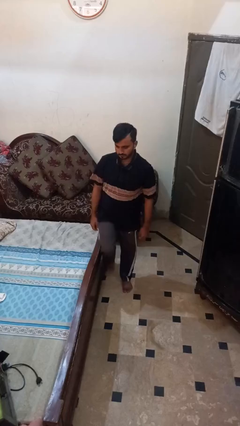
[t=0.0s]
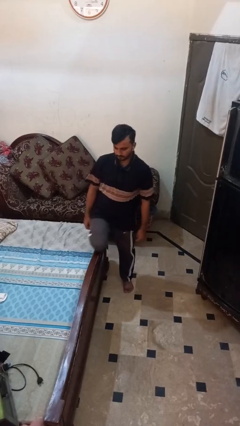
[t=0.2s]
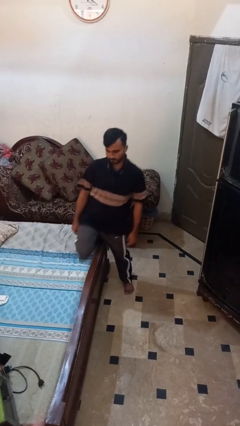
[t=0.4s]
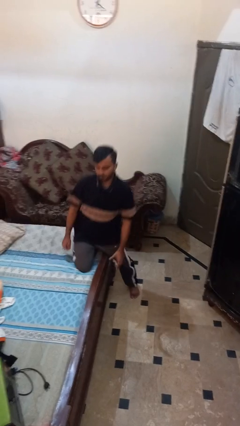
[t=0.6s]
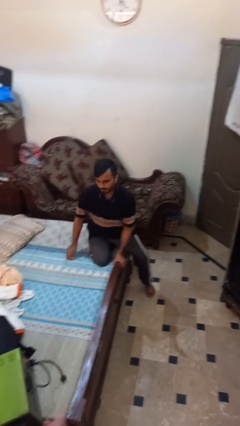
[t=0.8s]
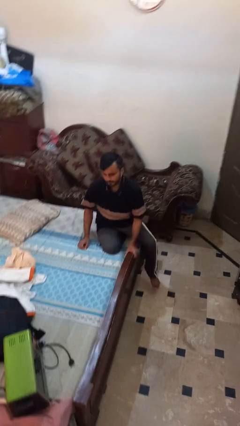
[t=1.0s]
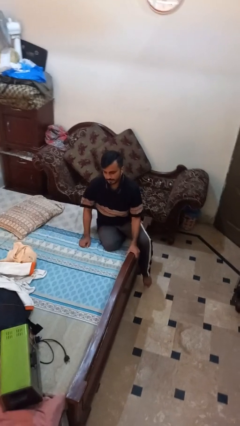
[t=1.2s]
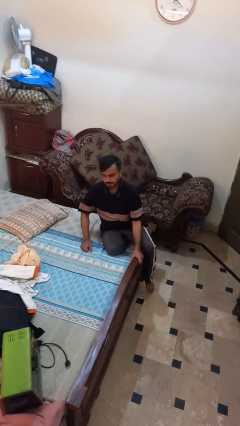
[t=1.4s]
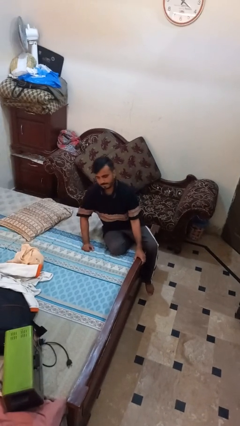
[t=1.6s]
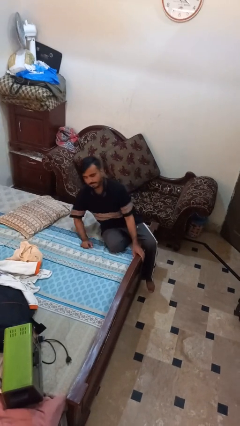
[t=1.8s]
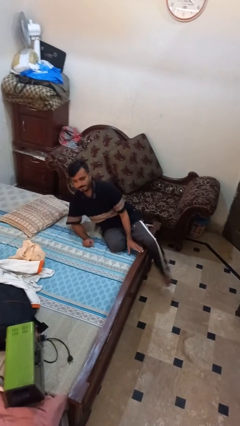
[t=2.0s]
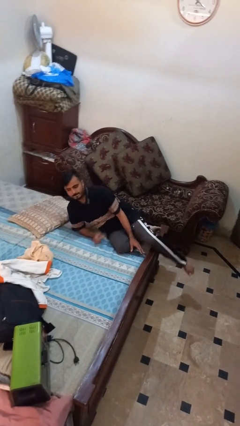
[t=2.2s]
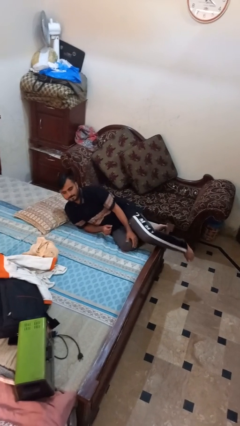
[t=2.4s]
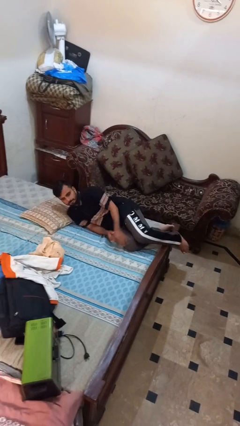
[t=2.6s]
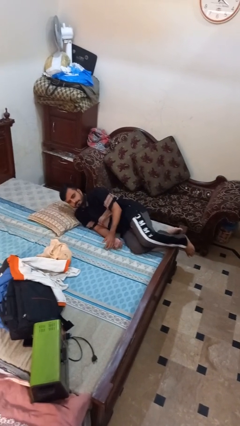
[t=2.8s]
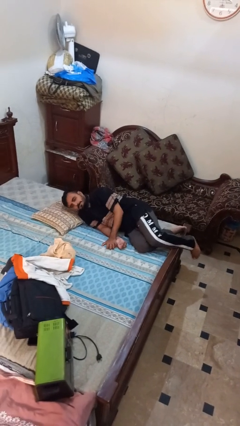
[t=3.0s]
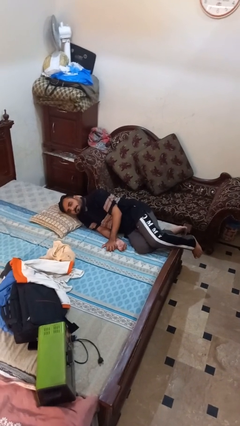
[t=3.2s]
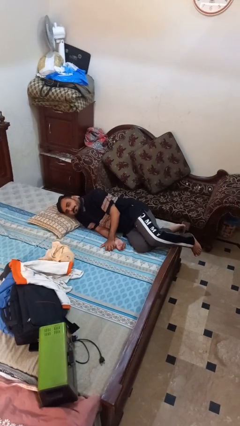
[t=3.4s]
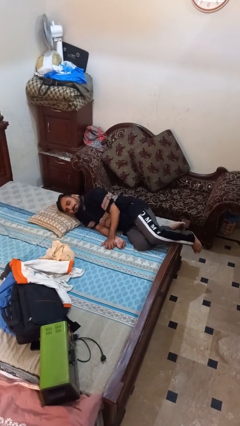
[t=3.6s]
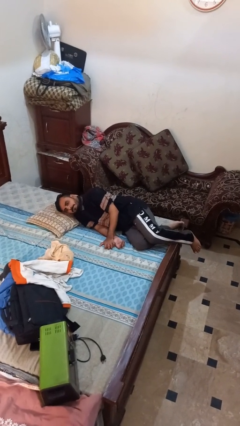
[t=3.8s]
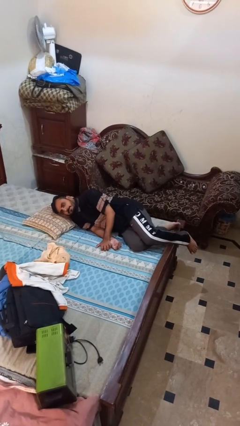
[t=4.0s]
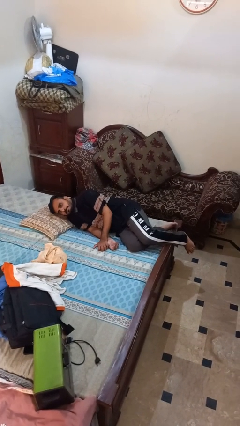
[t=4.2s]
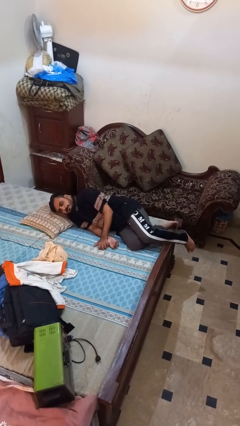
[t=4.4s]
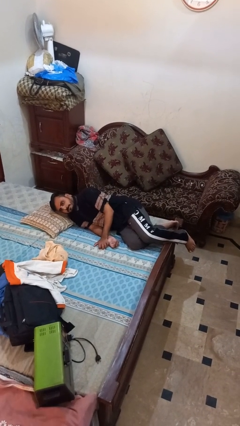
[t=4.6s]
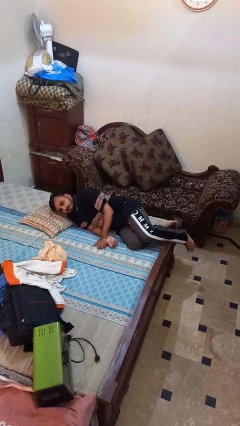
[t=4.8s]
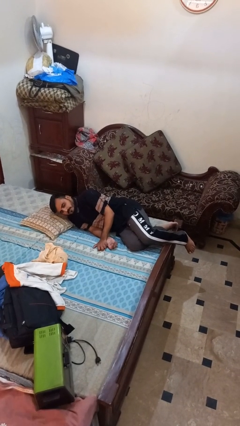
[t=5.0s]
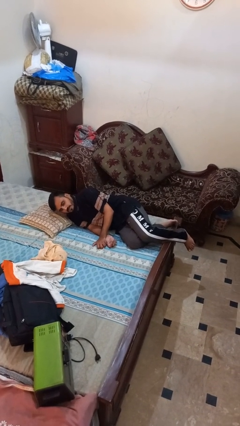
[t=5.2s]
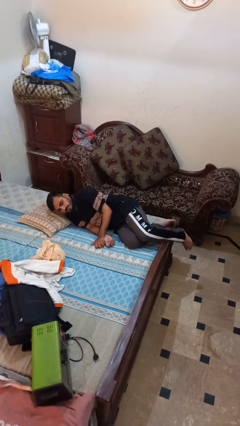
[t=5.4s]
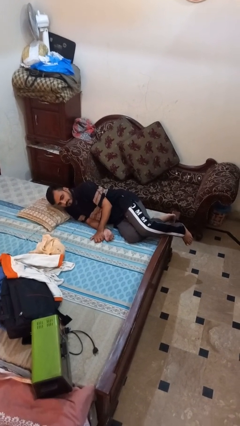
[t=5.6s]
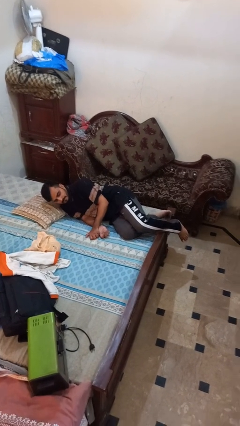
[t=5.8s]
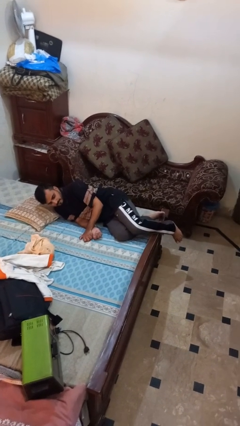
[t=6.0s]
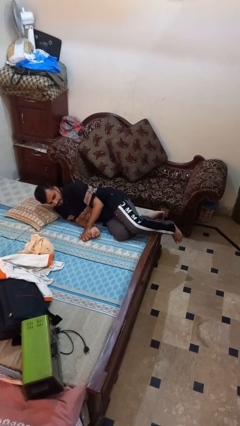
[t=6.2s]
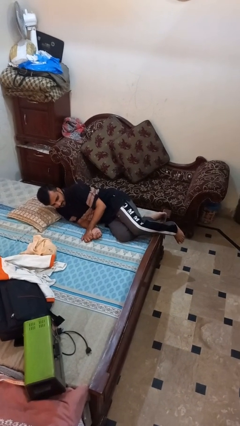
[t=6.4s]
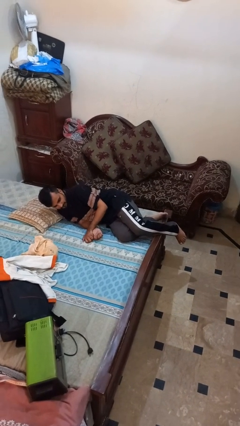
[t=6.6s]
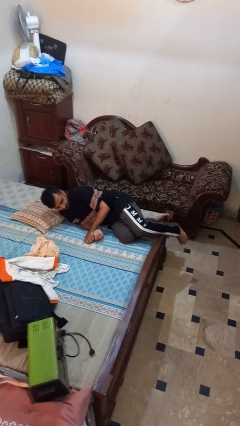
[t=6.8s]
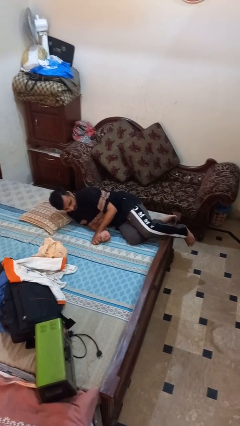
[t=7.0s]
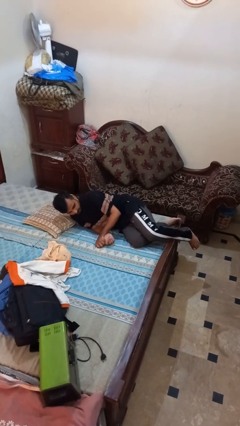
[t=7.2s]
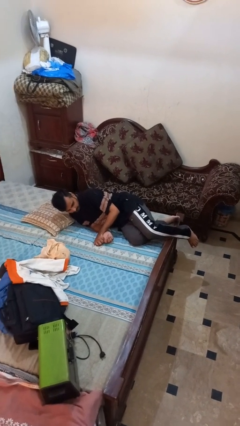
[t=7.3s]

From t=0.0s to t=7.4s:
person lies down on bed

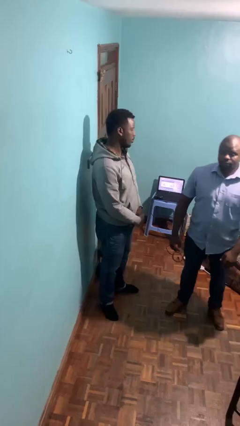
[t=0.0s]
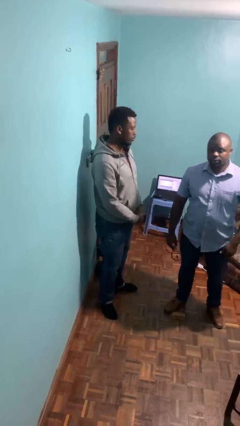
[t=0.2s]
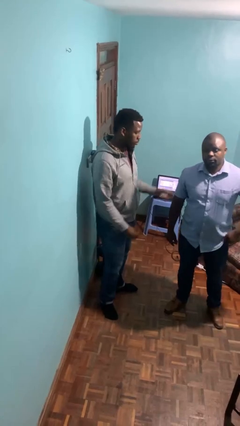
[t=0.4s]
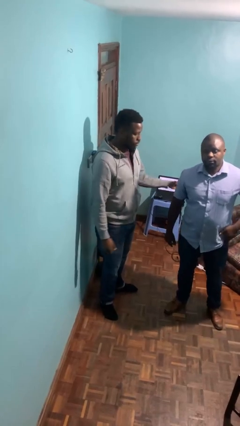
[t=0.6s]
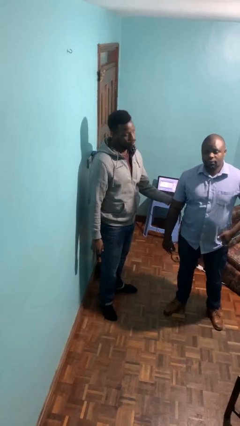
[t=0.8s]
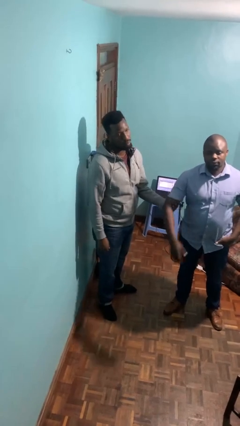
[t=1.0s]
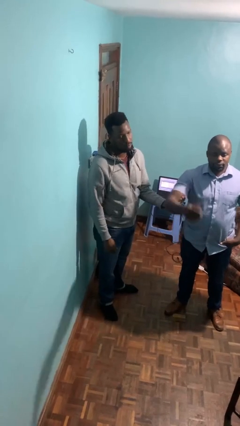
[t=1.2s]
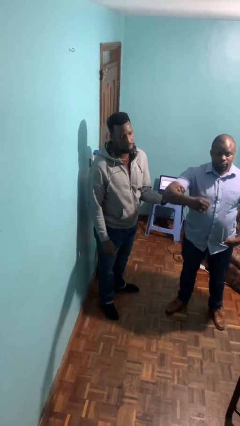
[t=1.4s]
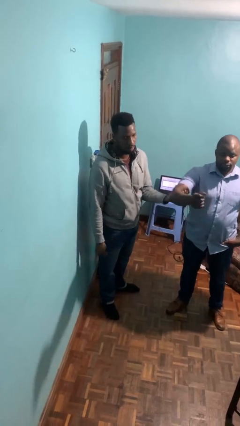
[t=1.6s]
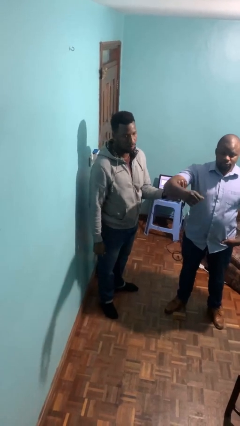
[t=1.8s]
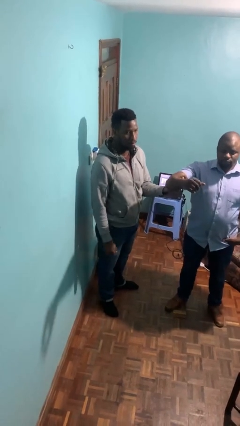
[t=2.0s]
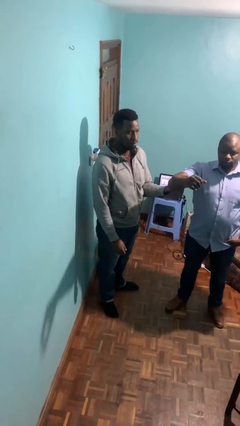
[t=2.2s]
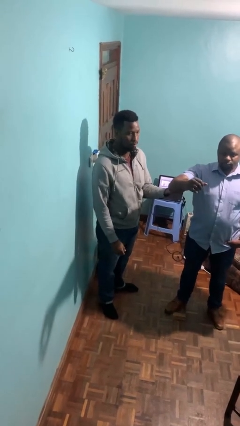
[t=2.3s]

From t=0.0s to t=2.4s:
person grabs person by bicep

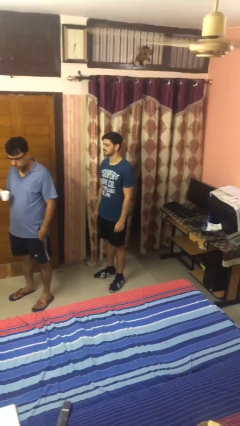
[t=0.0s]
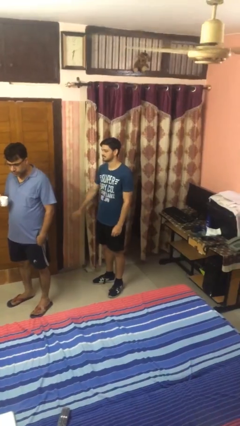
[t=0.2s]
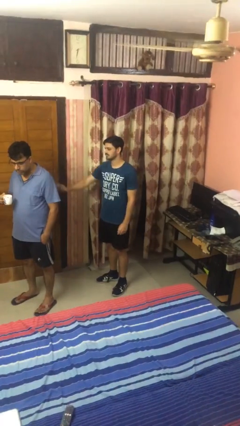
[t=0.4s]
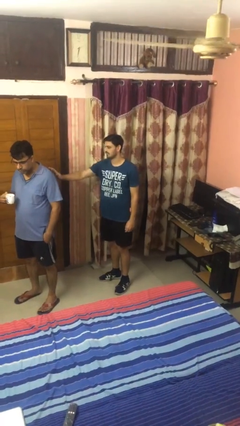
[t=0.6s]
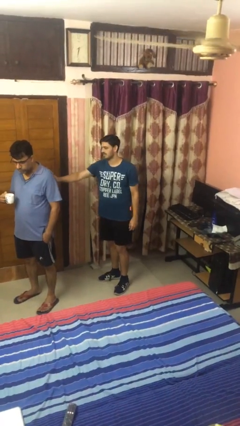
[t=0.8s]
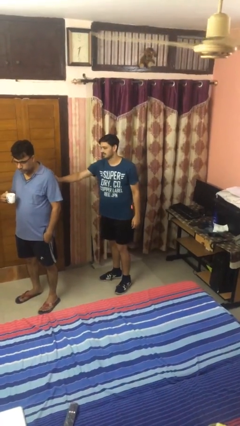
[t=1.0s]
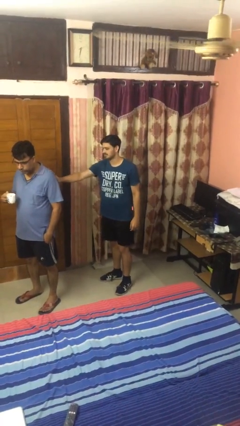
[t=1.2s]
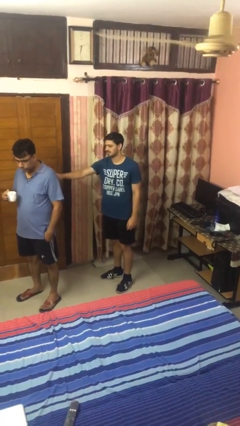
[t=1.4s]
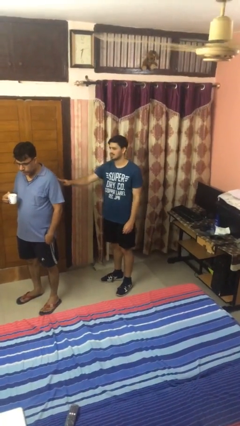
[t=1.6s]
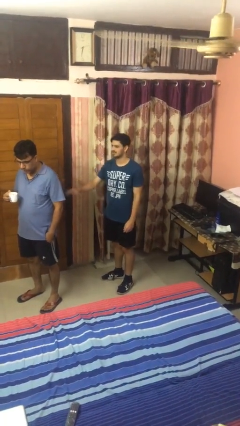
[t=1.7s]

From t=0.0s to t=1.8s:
person touches back of person

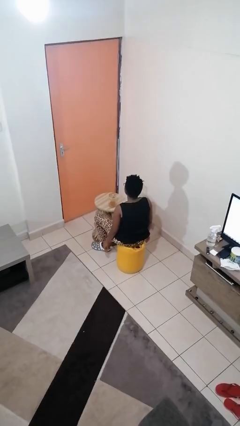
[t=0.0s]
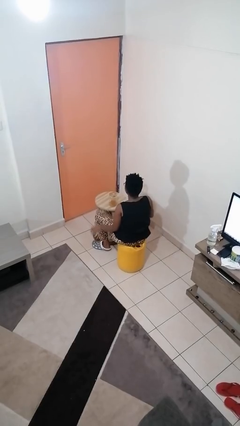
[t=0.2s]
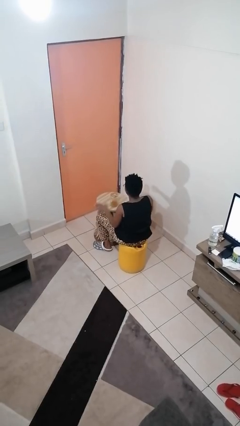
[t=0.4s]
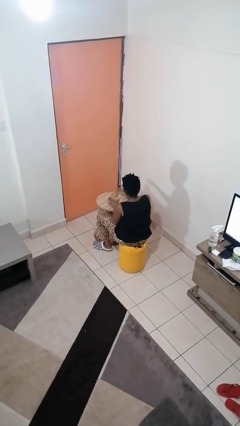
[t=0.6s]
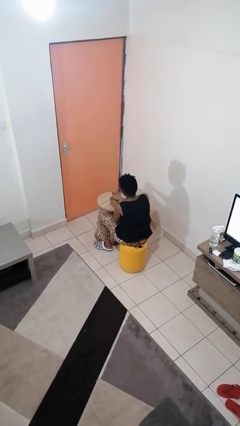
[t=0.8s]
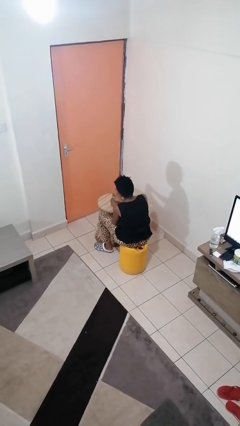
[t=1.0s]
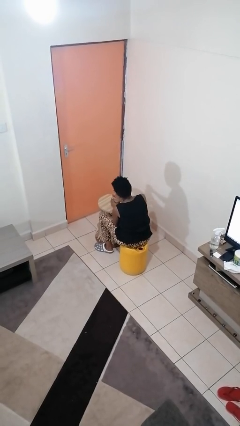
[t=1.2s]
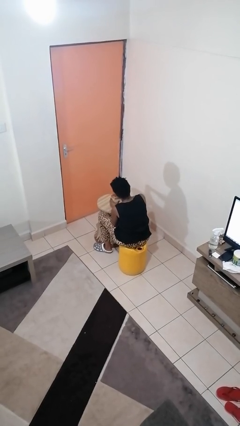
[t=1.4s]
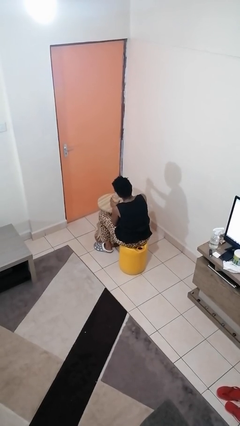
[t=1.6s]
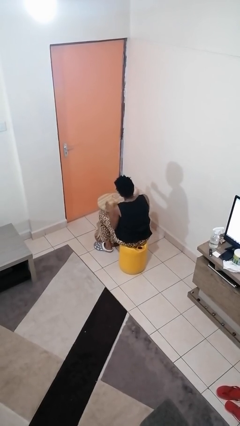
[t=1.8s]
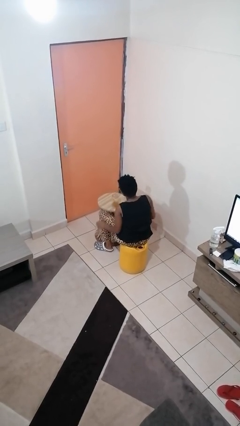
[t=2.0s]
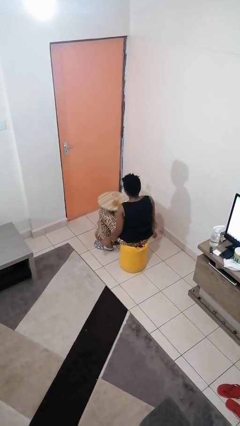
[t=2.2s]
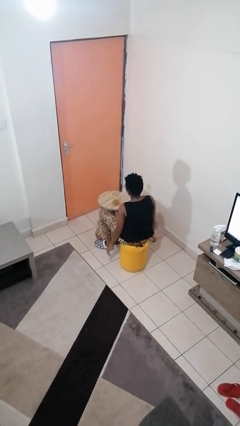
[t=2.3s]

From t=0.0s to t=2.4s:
person opens jar

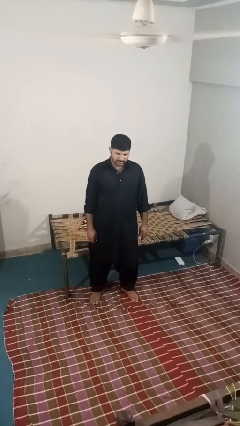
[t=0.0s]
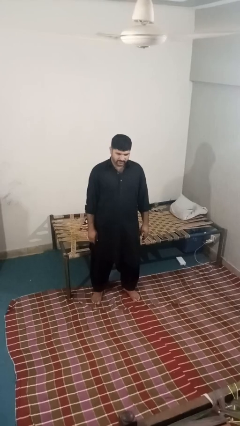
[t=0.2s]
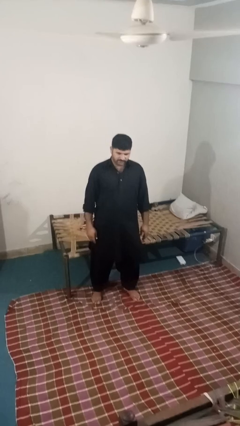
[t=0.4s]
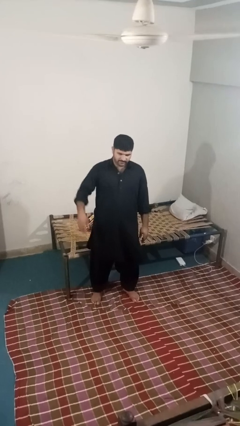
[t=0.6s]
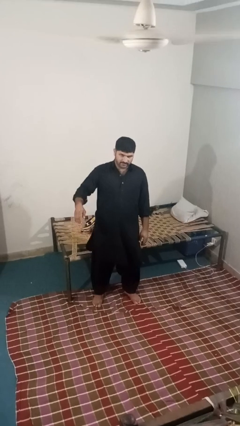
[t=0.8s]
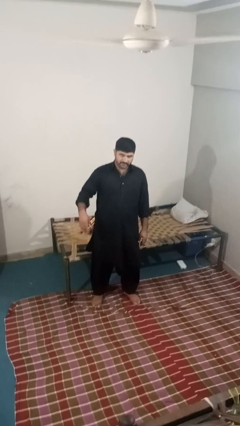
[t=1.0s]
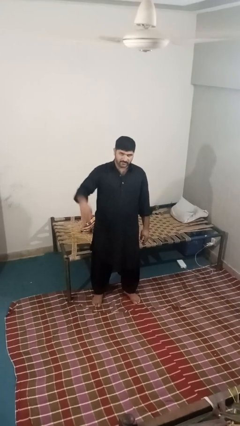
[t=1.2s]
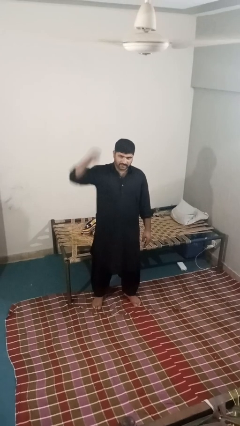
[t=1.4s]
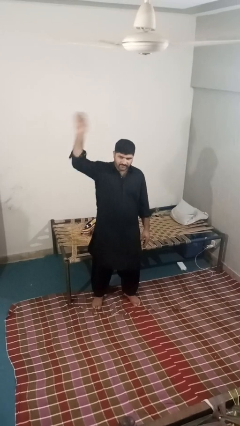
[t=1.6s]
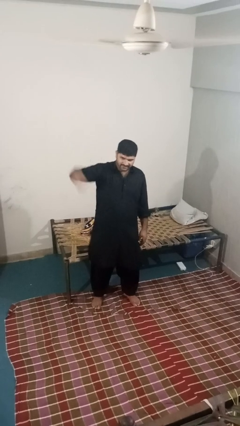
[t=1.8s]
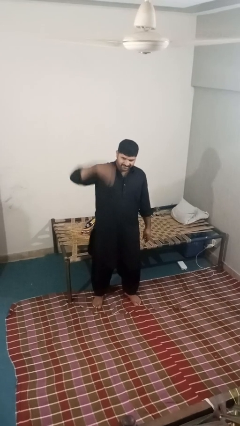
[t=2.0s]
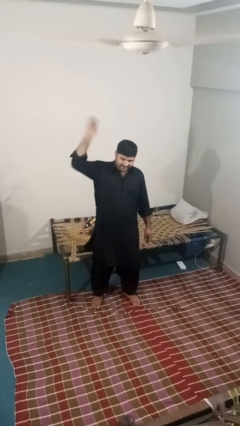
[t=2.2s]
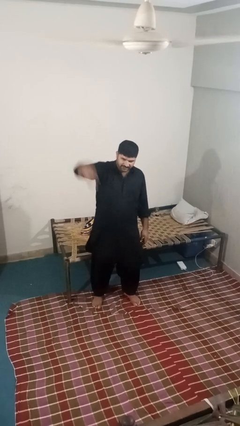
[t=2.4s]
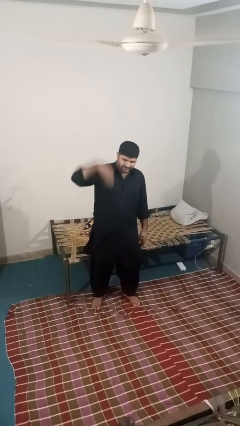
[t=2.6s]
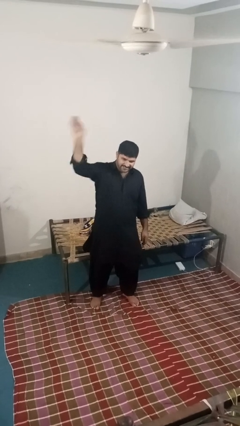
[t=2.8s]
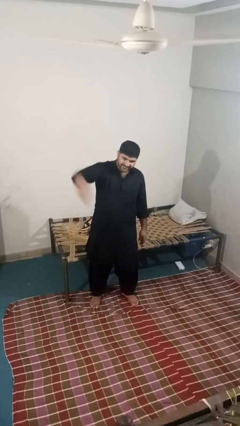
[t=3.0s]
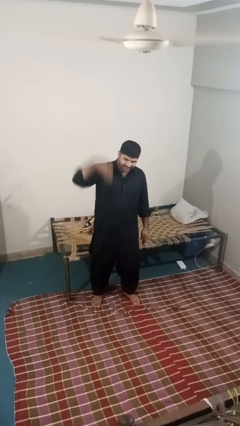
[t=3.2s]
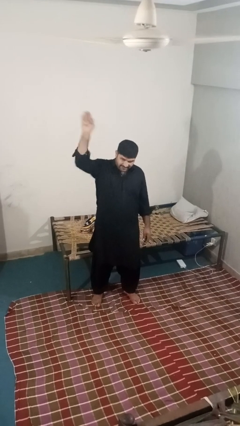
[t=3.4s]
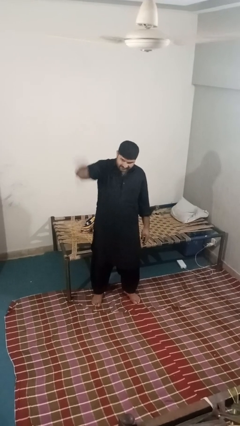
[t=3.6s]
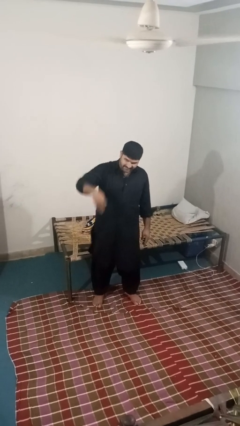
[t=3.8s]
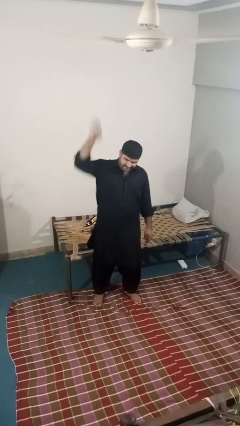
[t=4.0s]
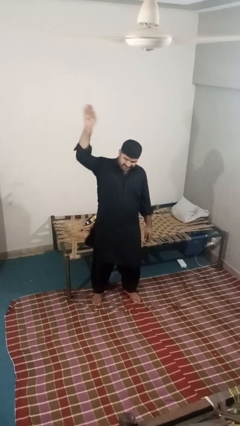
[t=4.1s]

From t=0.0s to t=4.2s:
person gestures come here
